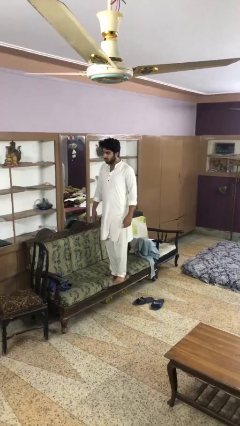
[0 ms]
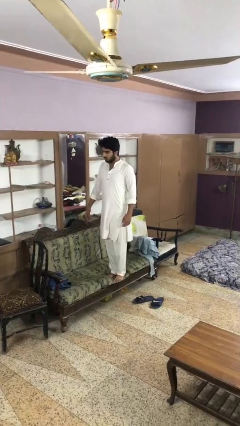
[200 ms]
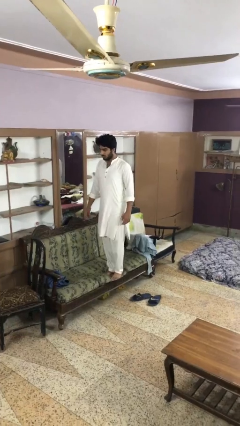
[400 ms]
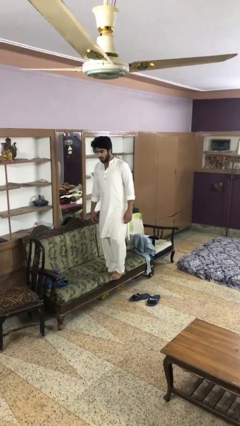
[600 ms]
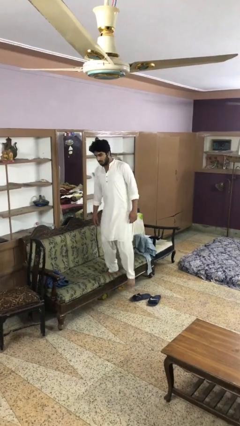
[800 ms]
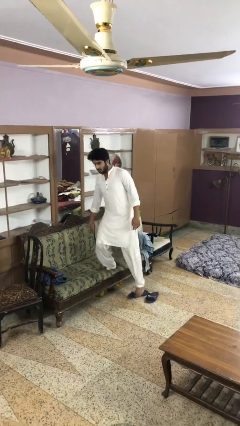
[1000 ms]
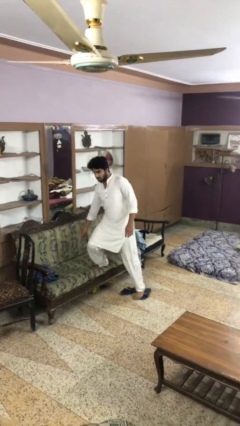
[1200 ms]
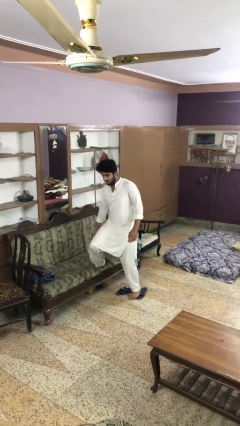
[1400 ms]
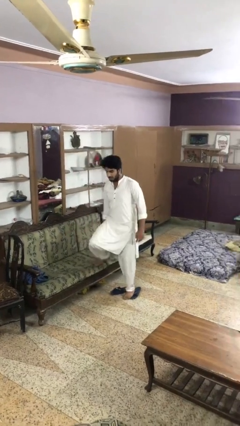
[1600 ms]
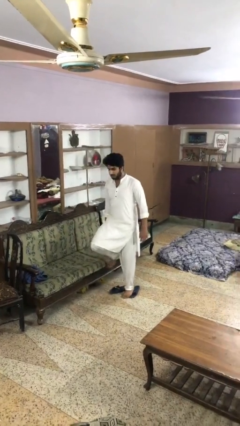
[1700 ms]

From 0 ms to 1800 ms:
person climbs off couch

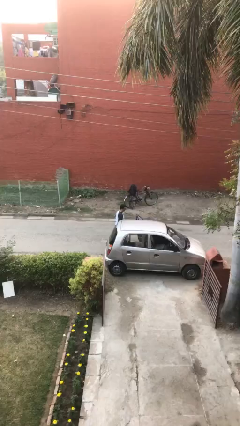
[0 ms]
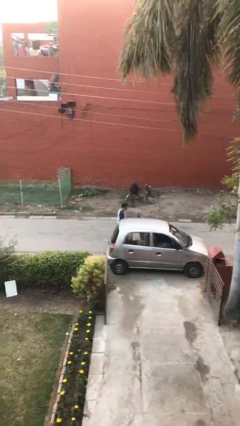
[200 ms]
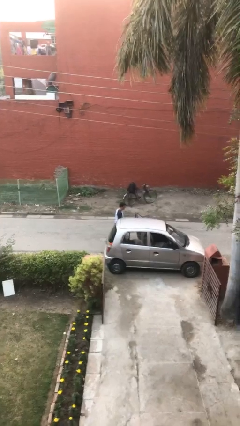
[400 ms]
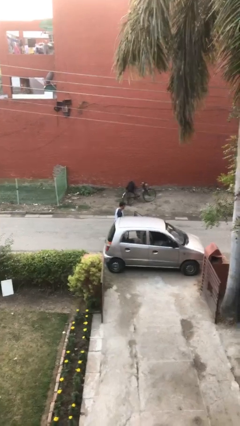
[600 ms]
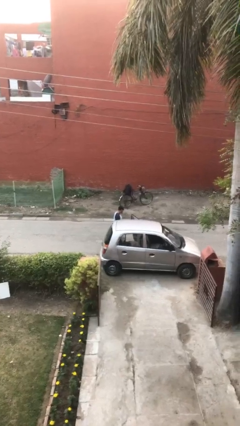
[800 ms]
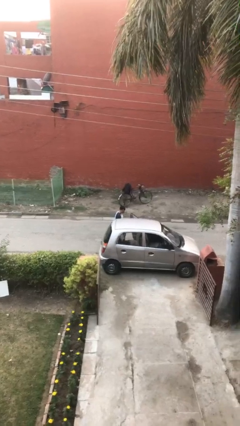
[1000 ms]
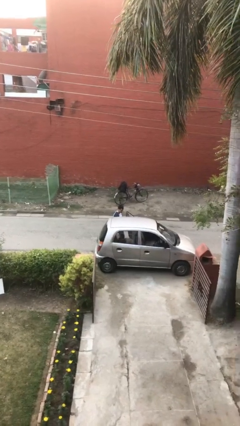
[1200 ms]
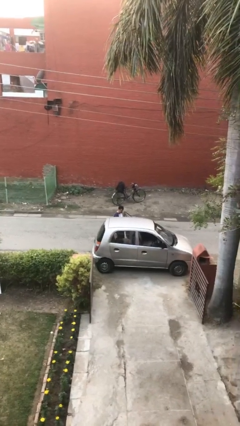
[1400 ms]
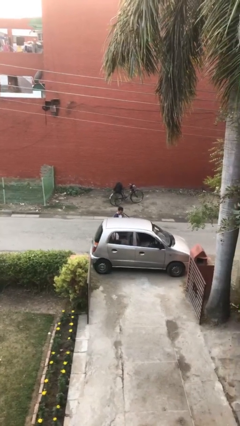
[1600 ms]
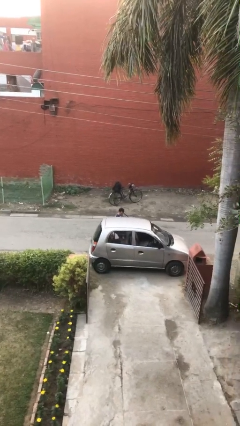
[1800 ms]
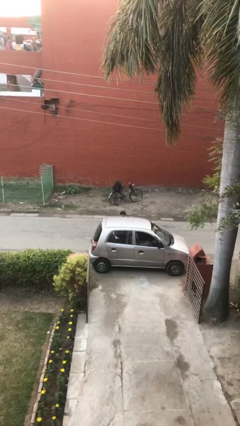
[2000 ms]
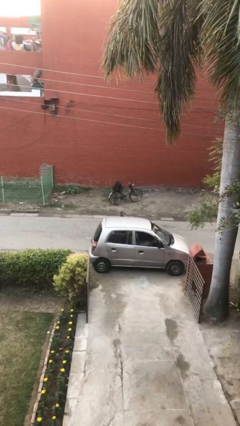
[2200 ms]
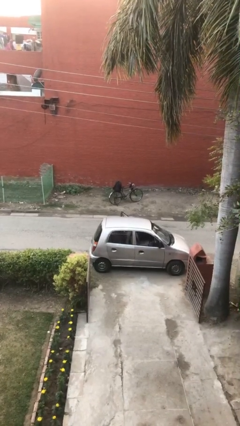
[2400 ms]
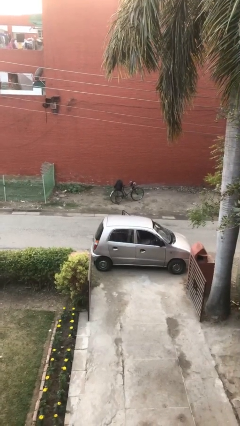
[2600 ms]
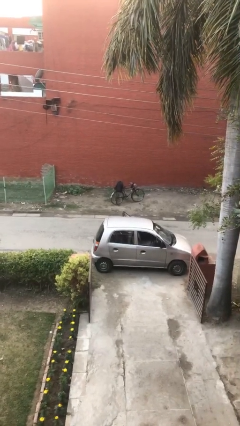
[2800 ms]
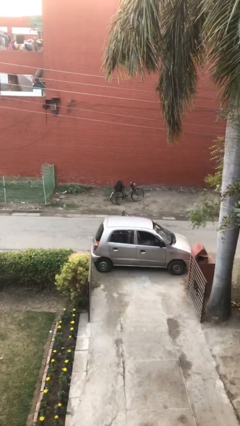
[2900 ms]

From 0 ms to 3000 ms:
person enters car

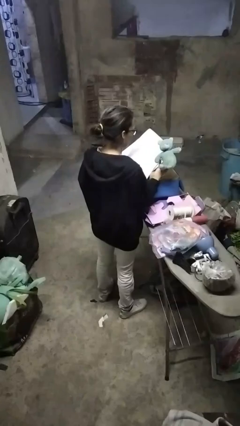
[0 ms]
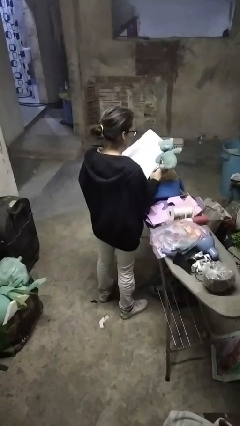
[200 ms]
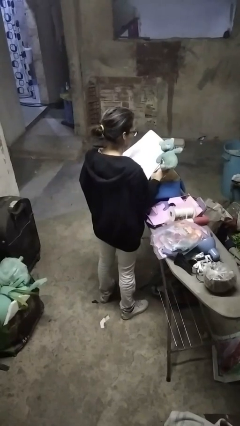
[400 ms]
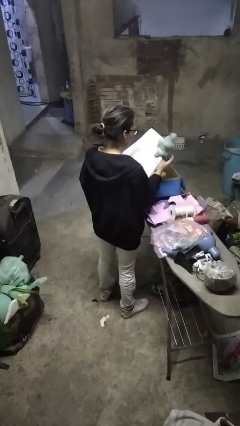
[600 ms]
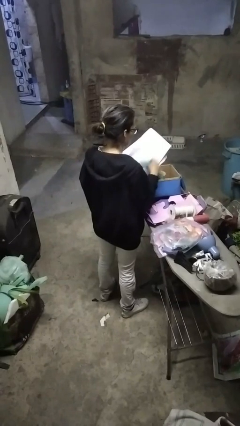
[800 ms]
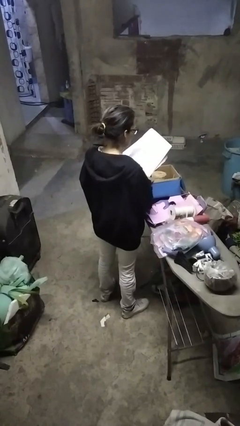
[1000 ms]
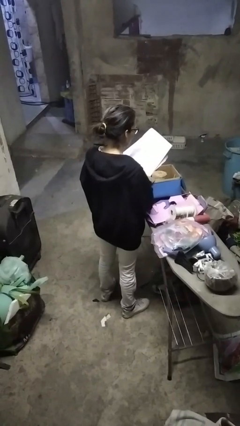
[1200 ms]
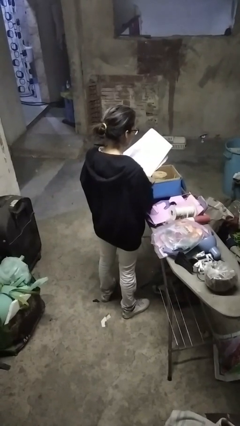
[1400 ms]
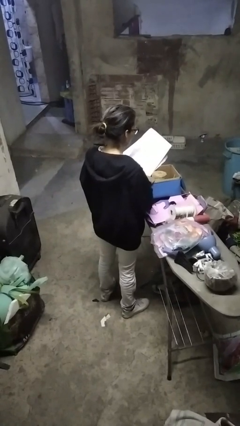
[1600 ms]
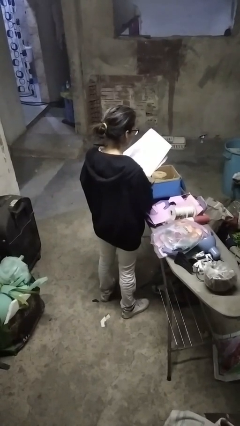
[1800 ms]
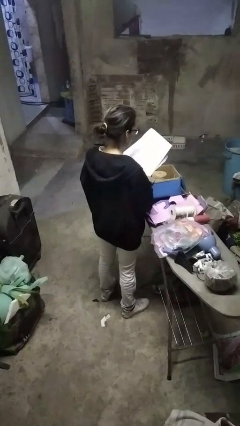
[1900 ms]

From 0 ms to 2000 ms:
person puts object into box

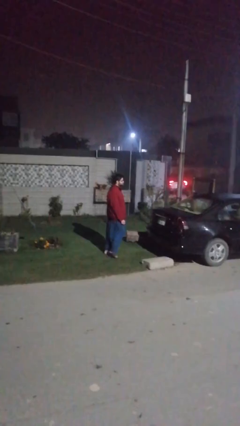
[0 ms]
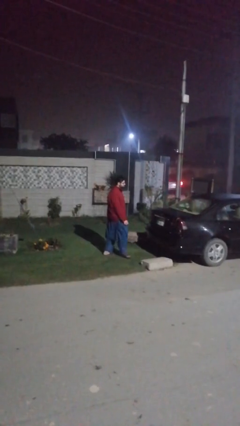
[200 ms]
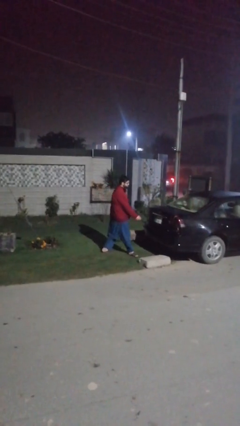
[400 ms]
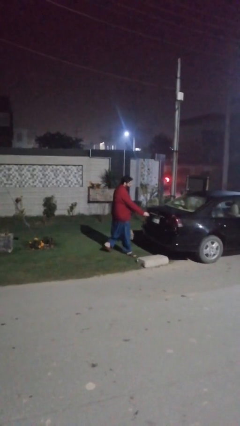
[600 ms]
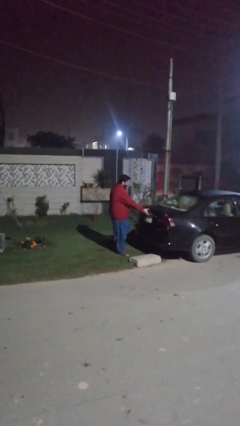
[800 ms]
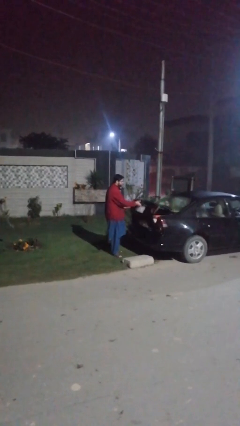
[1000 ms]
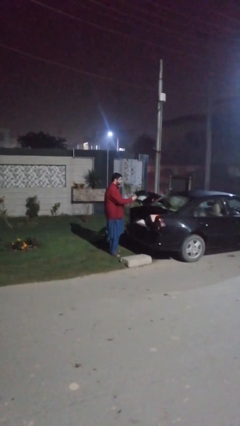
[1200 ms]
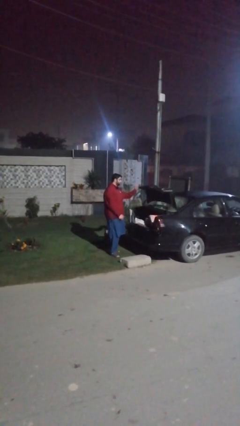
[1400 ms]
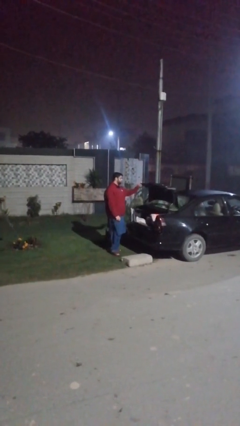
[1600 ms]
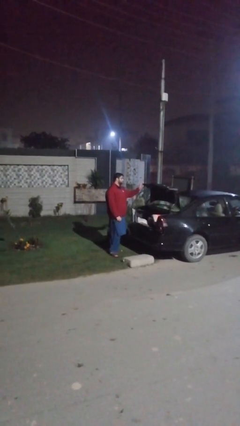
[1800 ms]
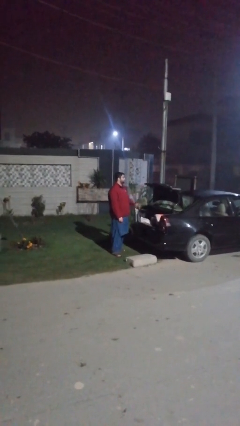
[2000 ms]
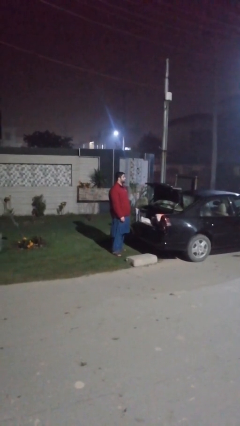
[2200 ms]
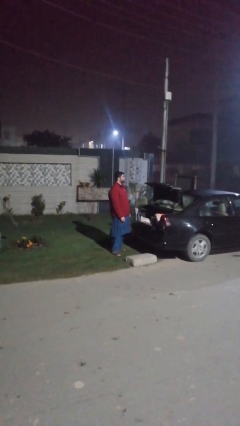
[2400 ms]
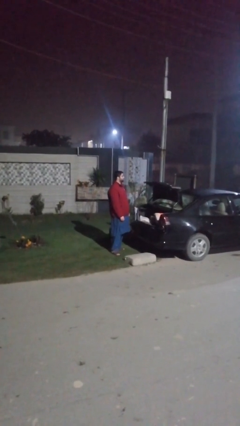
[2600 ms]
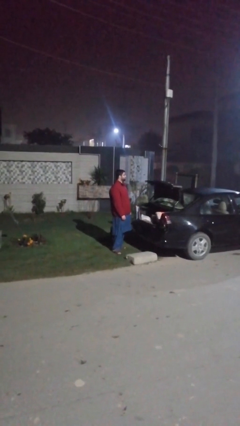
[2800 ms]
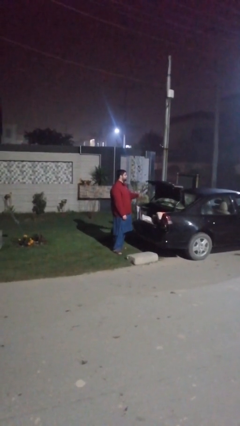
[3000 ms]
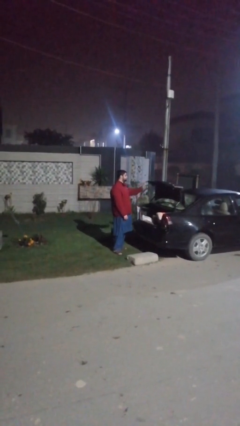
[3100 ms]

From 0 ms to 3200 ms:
person opens car trunk

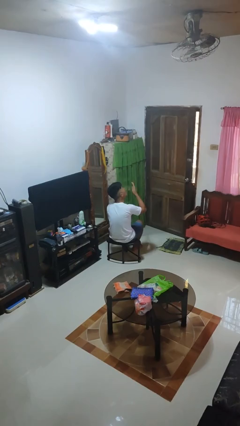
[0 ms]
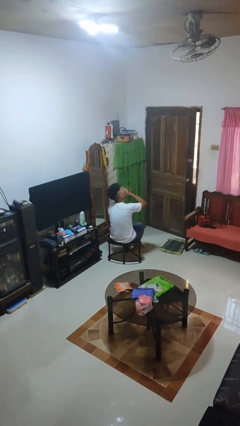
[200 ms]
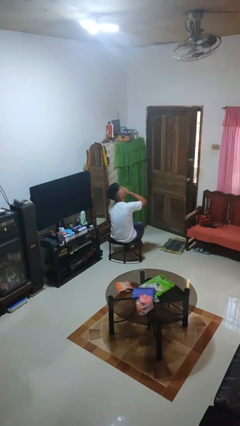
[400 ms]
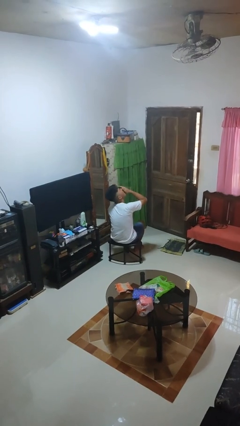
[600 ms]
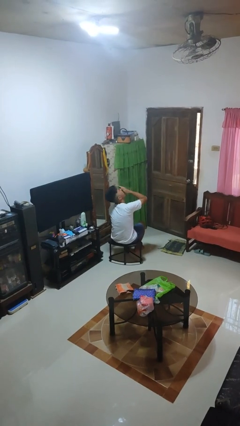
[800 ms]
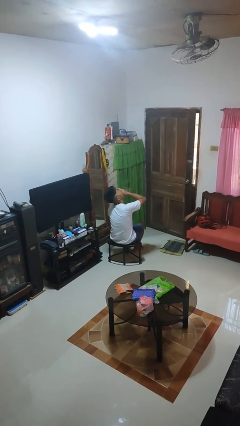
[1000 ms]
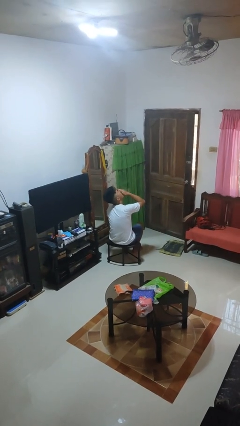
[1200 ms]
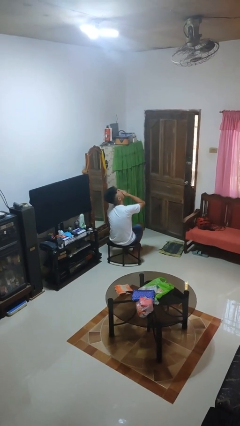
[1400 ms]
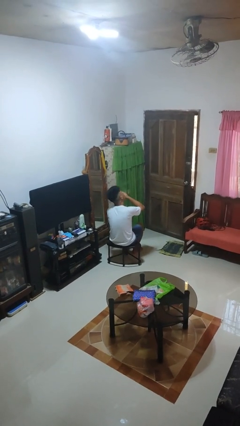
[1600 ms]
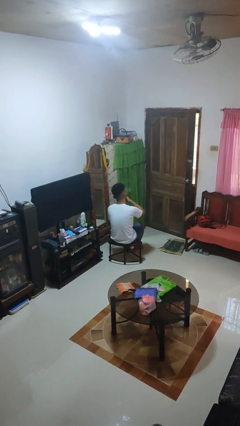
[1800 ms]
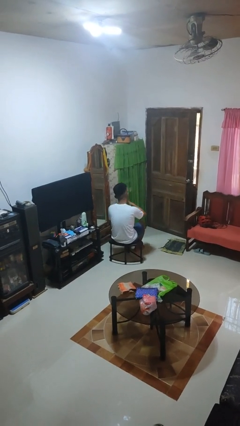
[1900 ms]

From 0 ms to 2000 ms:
person yawns

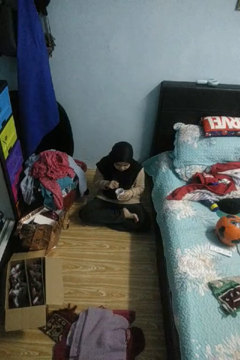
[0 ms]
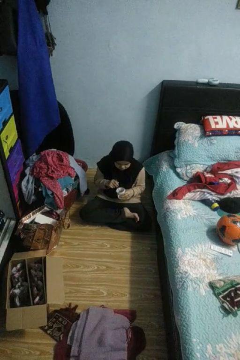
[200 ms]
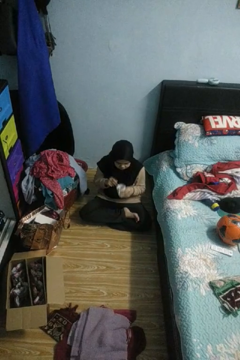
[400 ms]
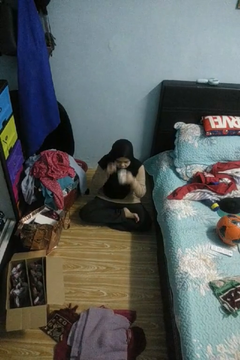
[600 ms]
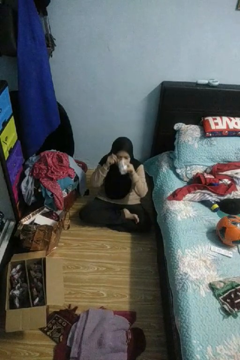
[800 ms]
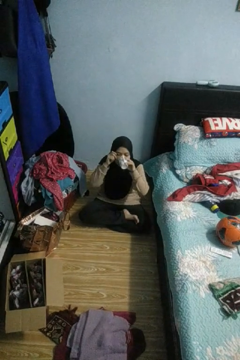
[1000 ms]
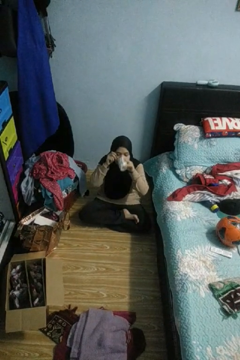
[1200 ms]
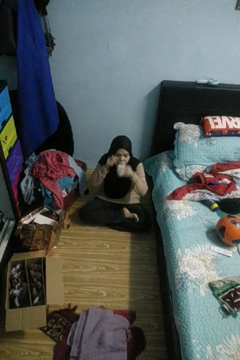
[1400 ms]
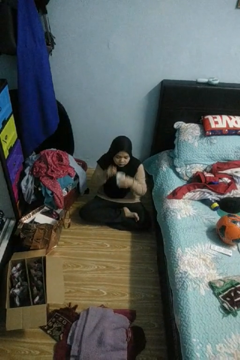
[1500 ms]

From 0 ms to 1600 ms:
person drinks from mug

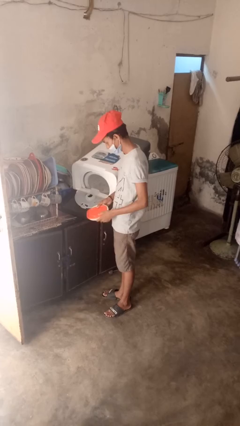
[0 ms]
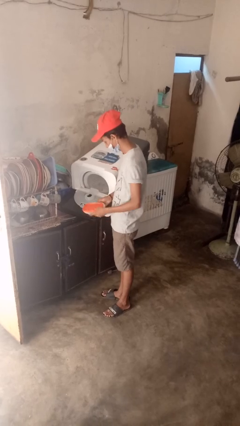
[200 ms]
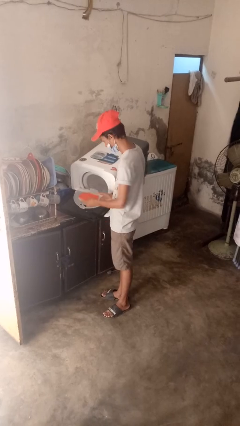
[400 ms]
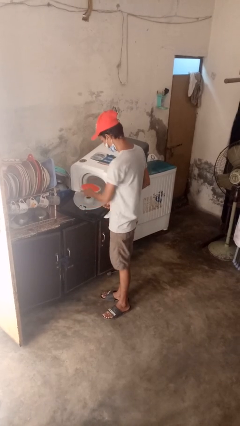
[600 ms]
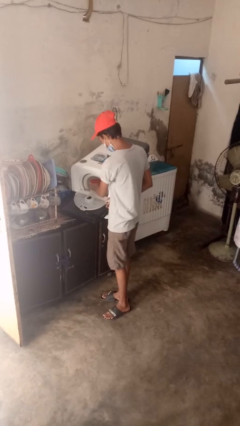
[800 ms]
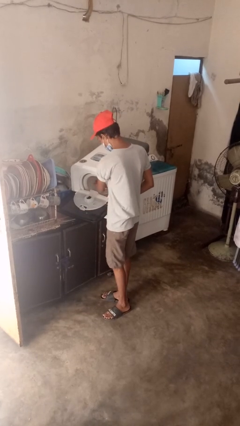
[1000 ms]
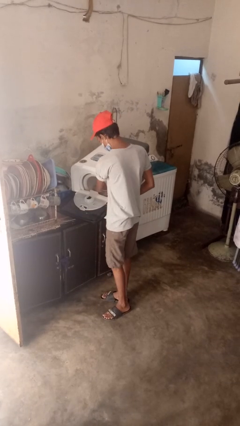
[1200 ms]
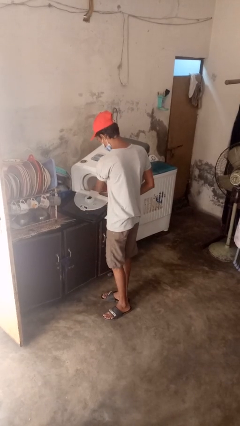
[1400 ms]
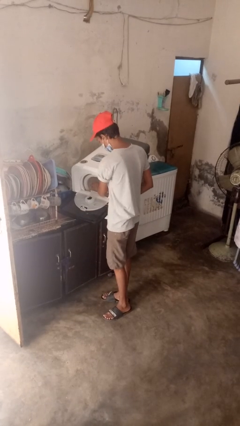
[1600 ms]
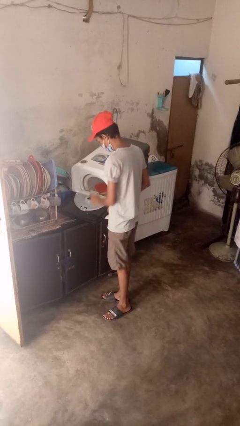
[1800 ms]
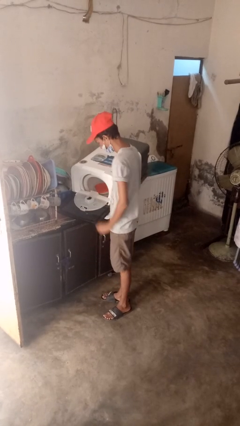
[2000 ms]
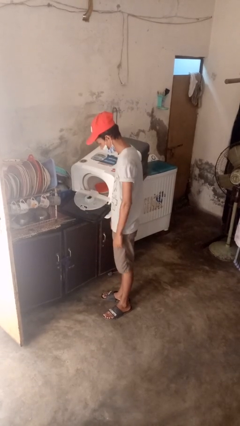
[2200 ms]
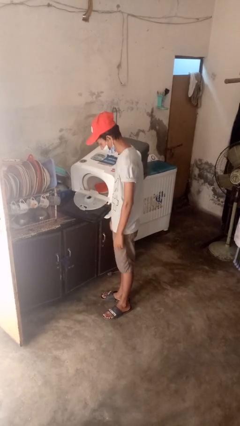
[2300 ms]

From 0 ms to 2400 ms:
person loads dishwasher

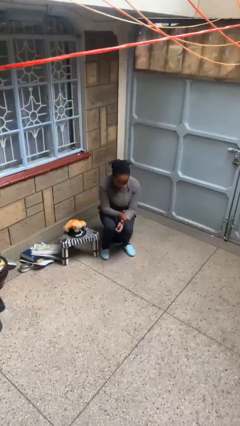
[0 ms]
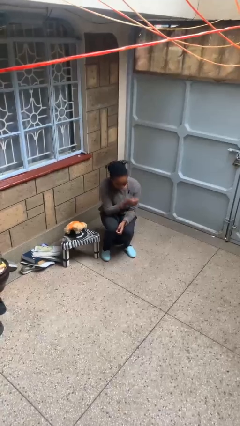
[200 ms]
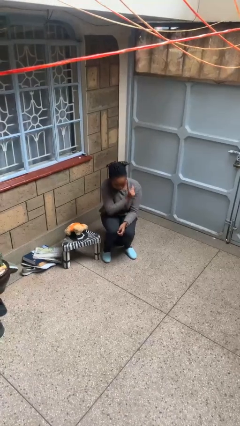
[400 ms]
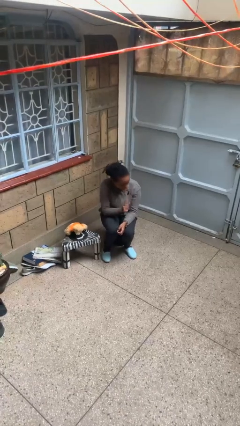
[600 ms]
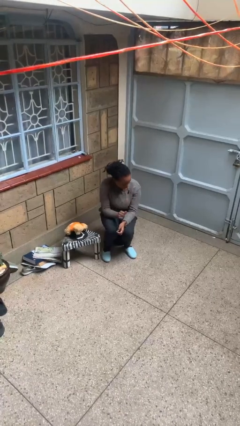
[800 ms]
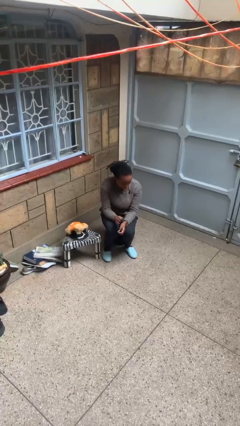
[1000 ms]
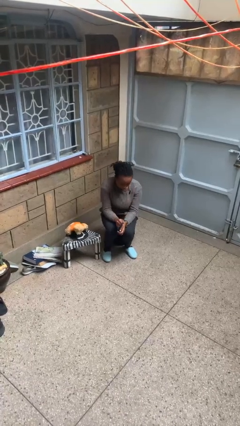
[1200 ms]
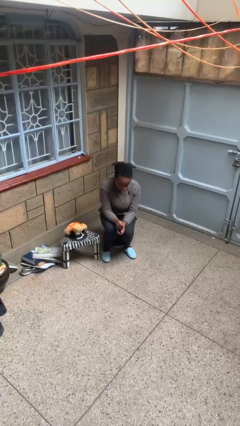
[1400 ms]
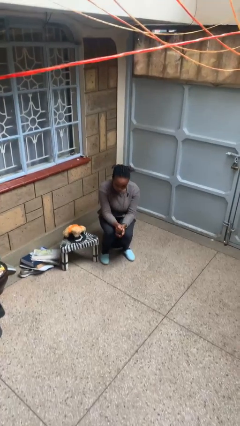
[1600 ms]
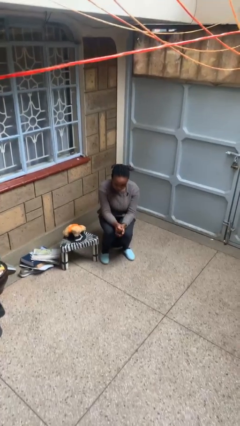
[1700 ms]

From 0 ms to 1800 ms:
person swats bug
